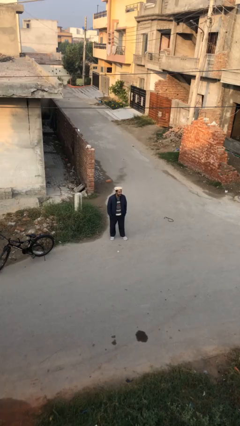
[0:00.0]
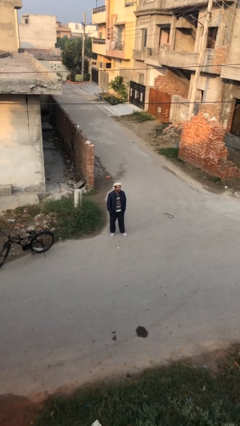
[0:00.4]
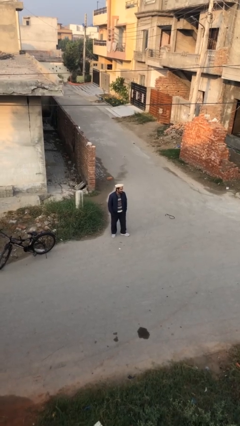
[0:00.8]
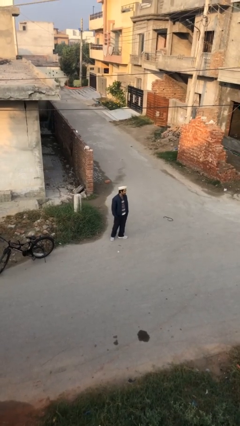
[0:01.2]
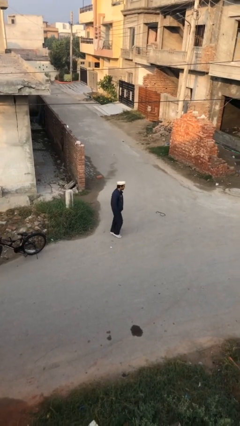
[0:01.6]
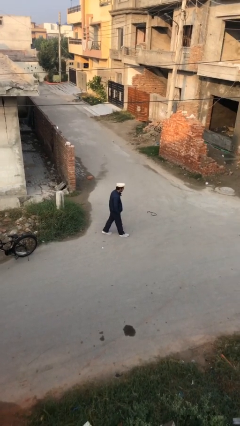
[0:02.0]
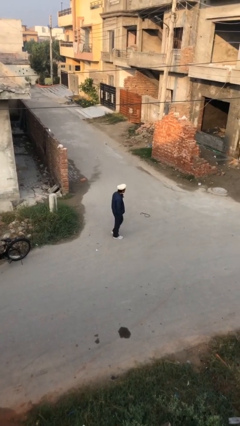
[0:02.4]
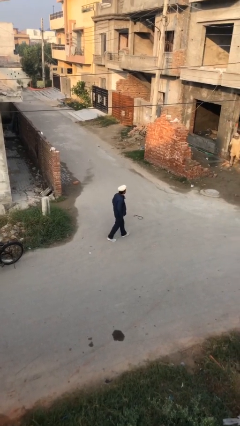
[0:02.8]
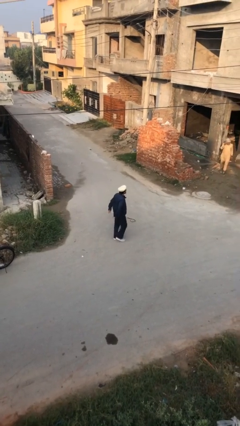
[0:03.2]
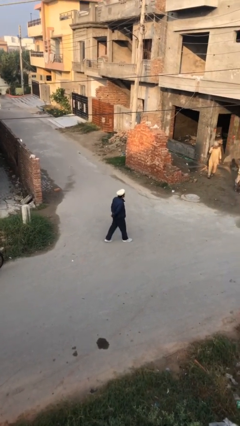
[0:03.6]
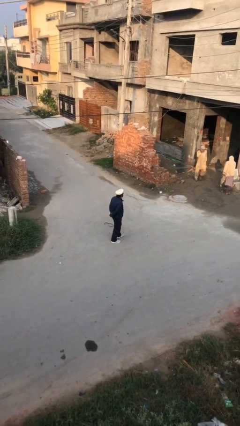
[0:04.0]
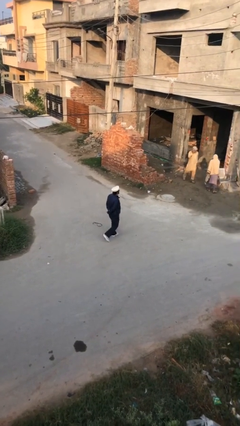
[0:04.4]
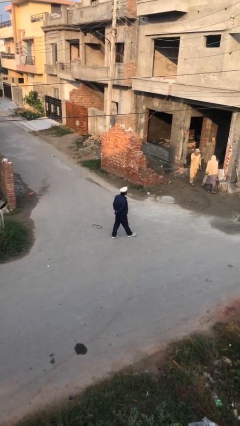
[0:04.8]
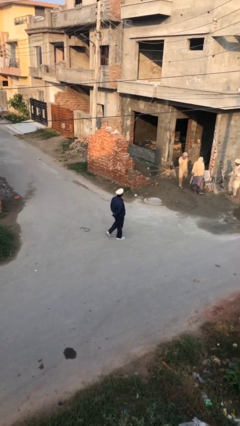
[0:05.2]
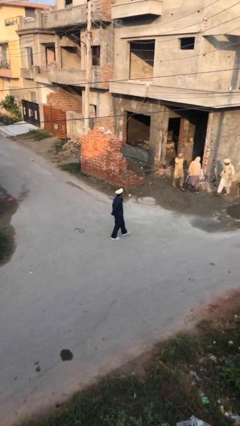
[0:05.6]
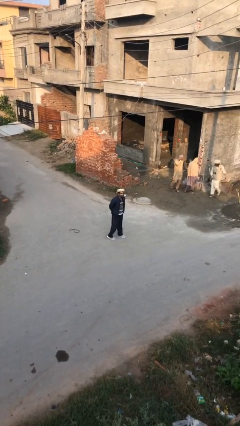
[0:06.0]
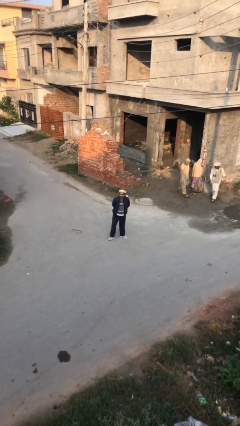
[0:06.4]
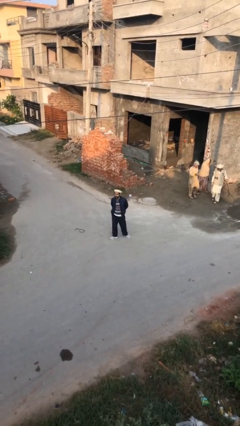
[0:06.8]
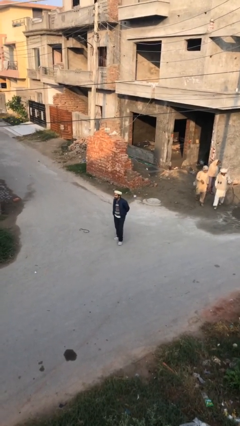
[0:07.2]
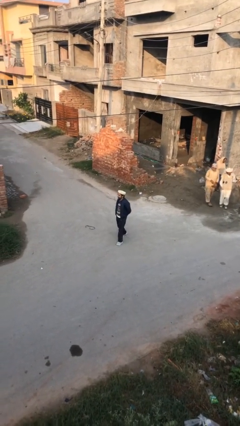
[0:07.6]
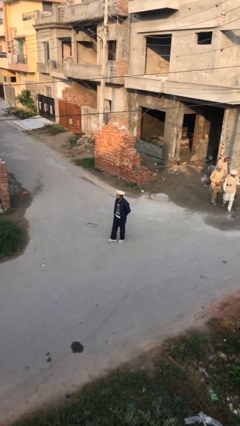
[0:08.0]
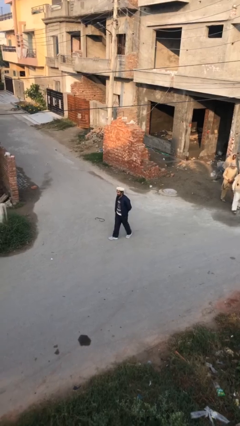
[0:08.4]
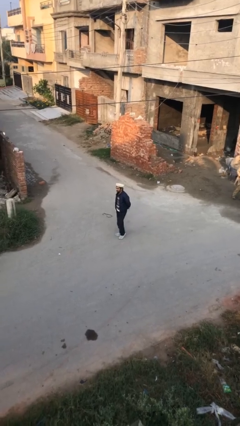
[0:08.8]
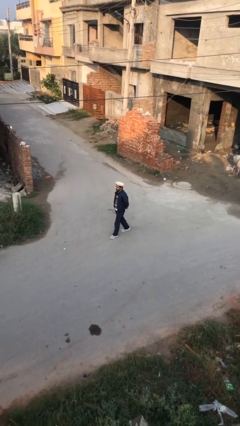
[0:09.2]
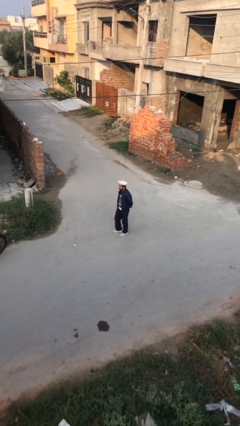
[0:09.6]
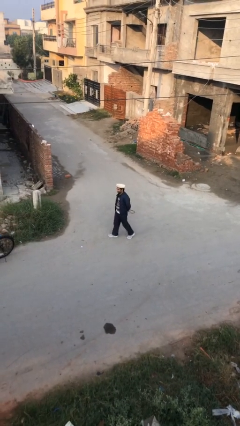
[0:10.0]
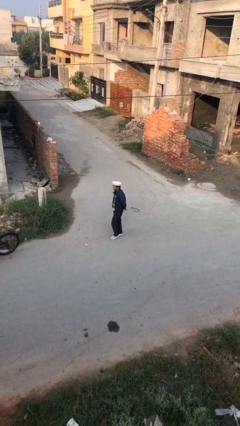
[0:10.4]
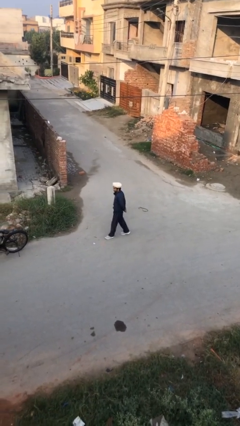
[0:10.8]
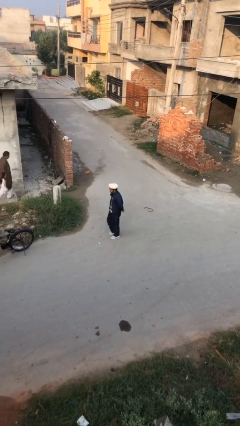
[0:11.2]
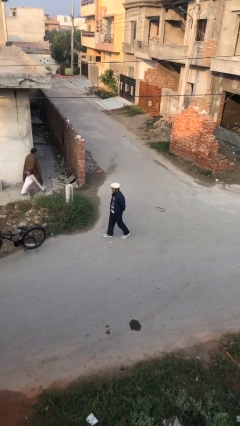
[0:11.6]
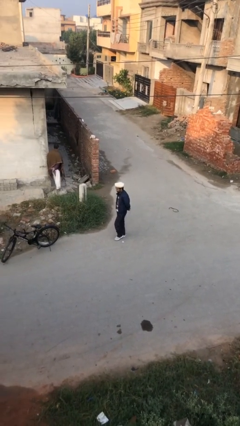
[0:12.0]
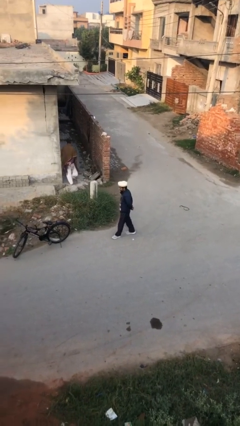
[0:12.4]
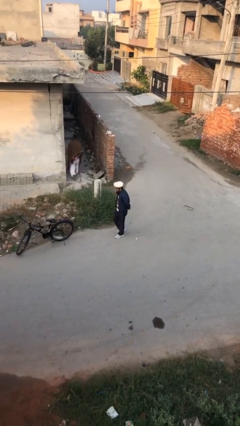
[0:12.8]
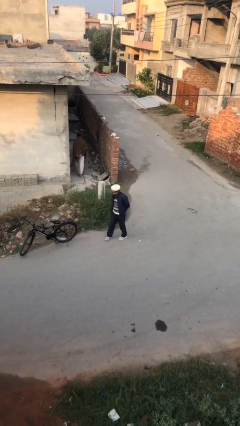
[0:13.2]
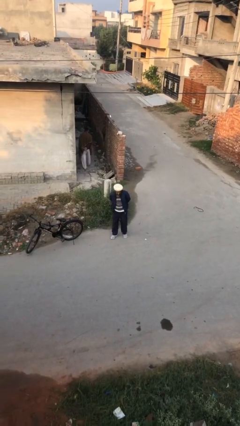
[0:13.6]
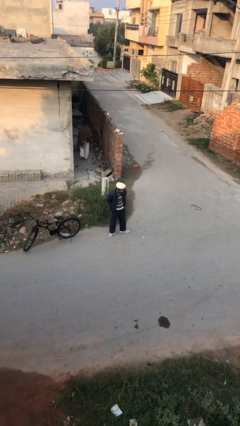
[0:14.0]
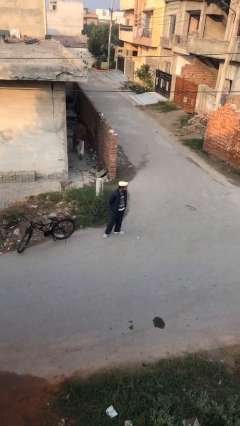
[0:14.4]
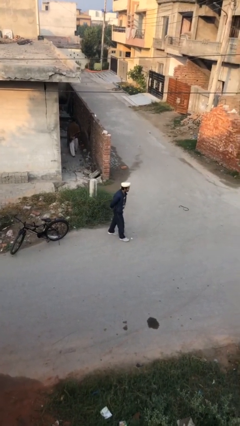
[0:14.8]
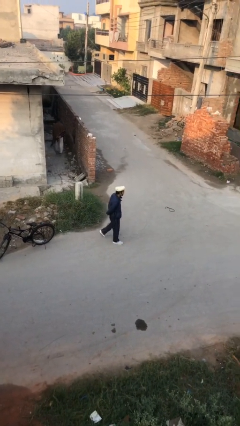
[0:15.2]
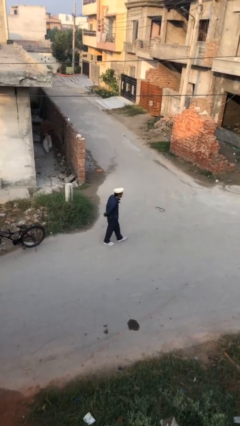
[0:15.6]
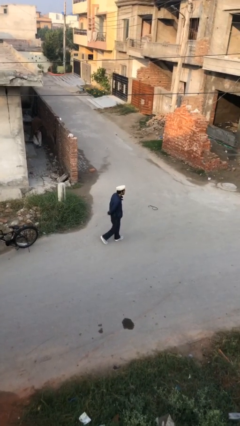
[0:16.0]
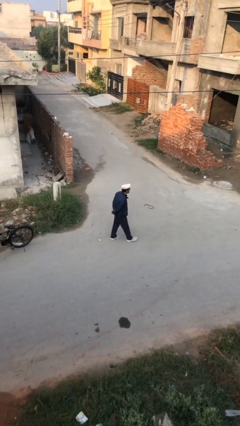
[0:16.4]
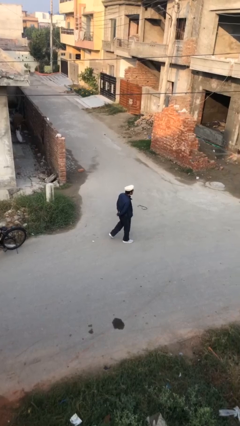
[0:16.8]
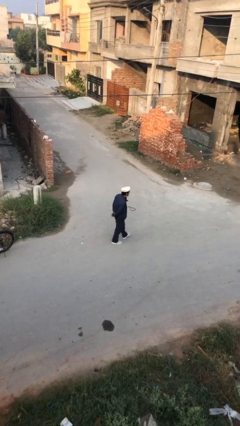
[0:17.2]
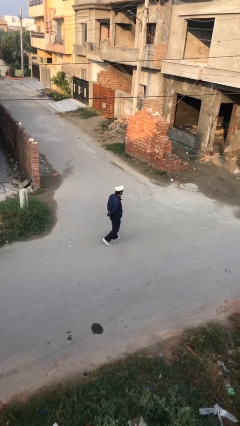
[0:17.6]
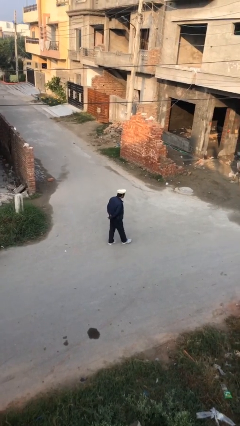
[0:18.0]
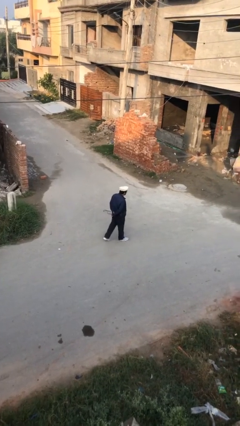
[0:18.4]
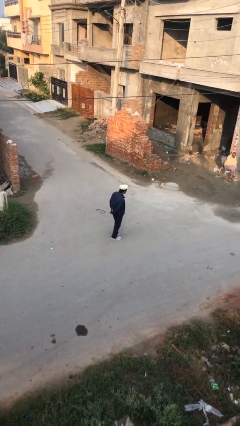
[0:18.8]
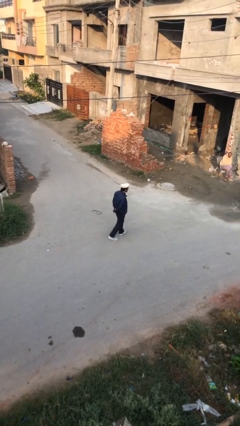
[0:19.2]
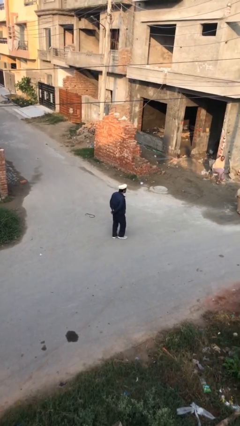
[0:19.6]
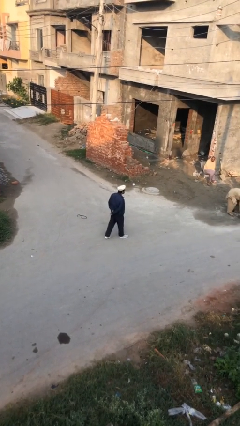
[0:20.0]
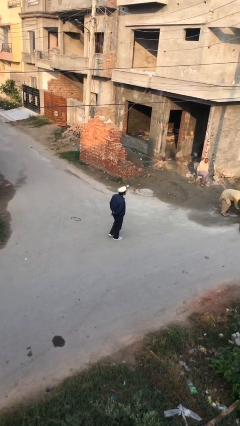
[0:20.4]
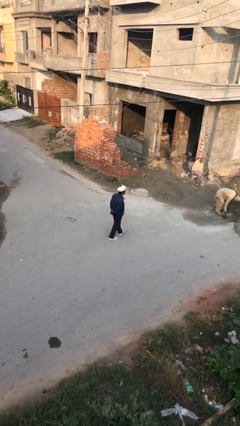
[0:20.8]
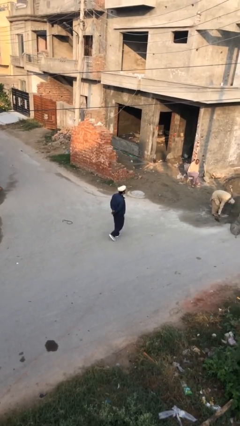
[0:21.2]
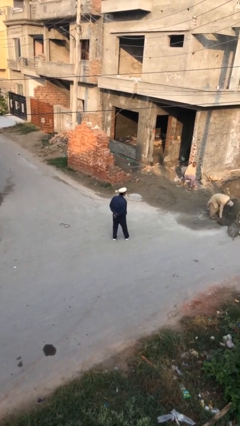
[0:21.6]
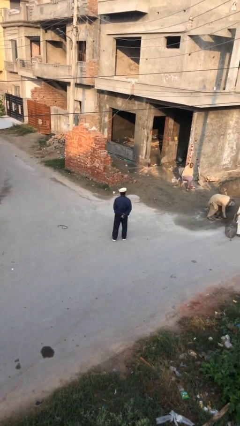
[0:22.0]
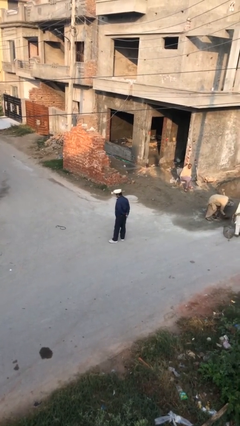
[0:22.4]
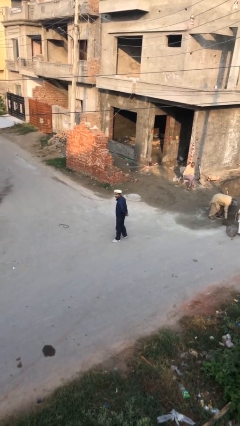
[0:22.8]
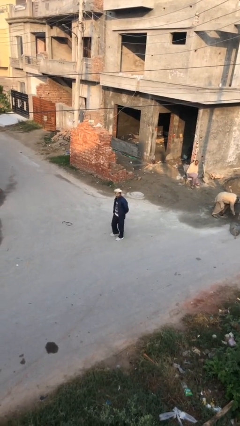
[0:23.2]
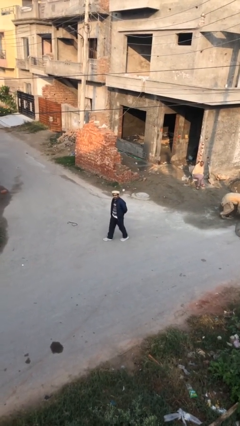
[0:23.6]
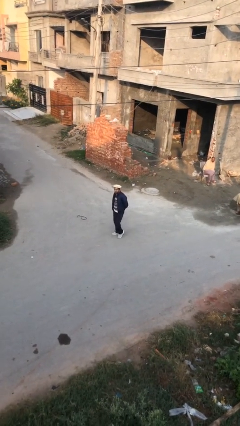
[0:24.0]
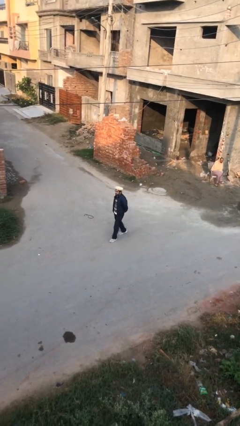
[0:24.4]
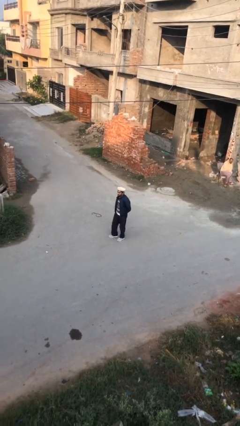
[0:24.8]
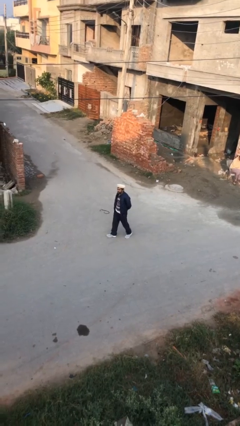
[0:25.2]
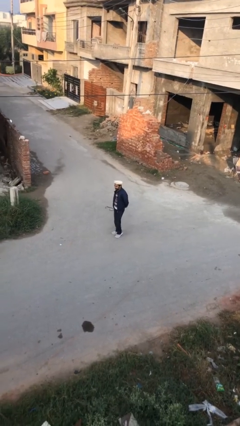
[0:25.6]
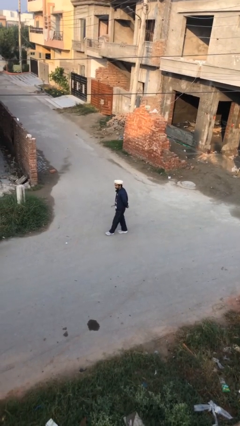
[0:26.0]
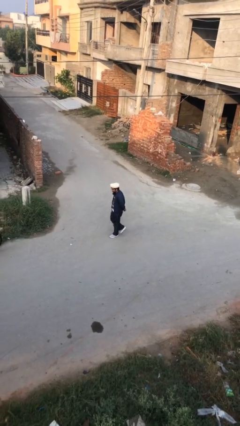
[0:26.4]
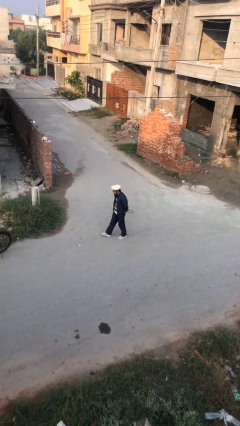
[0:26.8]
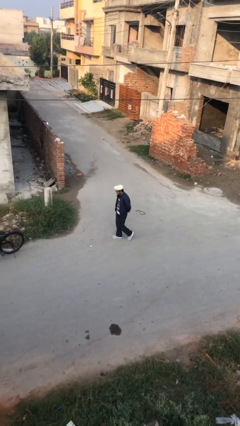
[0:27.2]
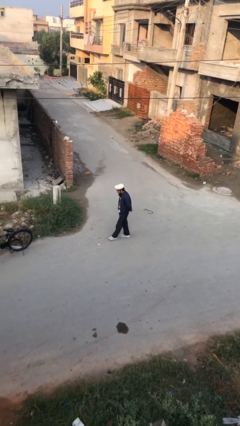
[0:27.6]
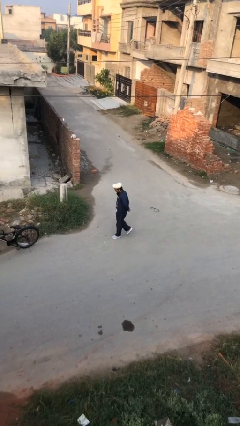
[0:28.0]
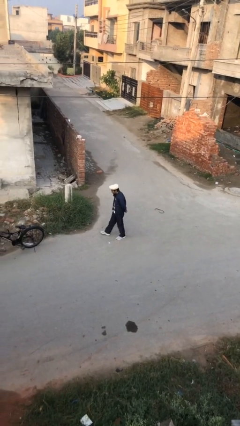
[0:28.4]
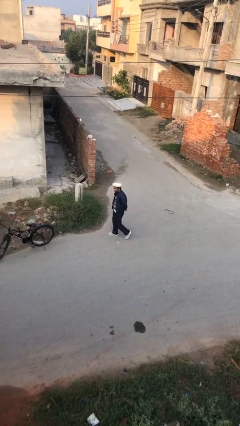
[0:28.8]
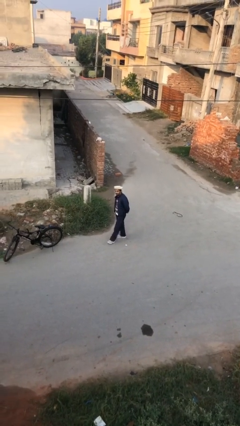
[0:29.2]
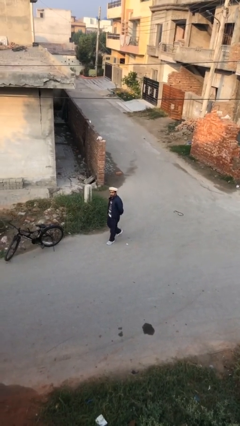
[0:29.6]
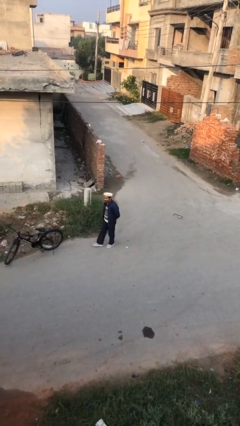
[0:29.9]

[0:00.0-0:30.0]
person walks

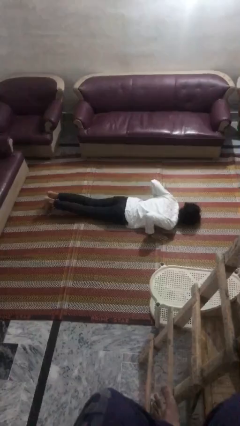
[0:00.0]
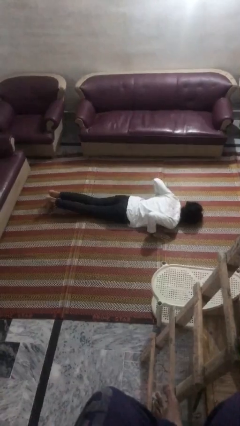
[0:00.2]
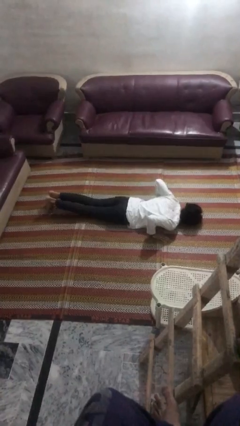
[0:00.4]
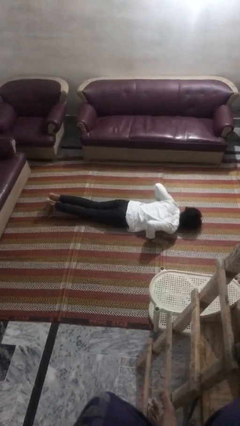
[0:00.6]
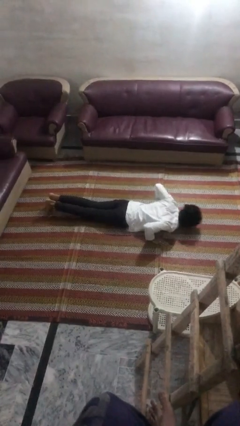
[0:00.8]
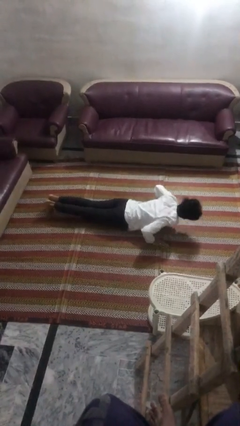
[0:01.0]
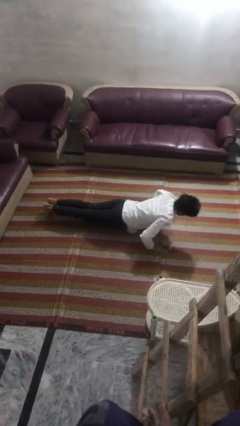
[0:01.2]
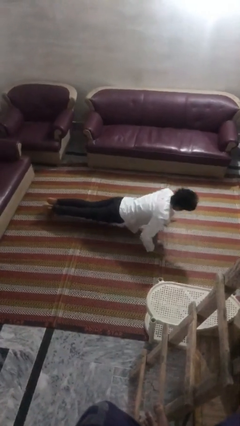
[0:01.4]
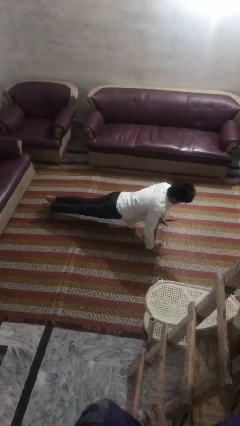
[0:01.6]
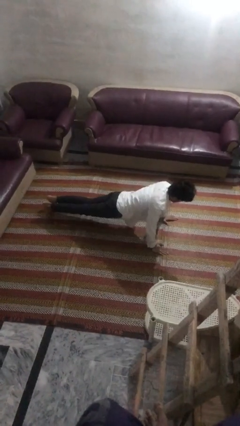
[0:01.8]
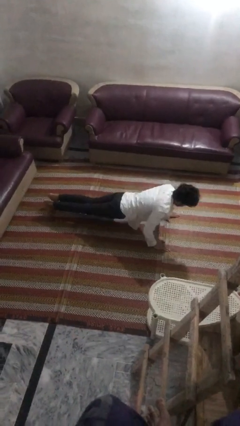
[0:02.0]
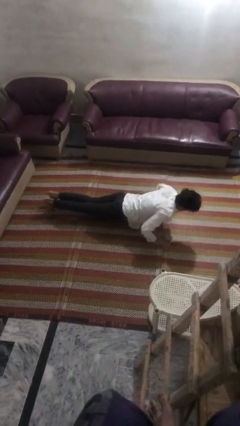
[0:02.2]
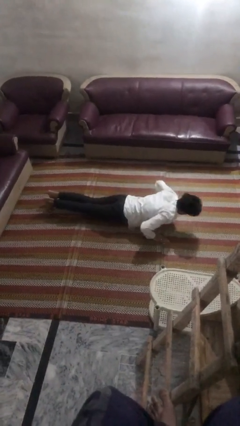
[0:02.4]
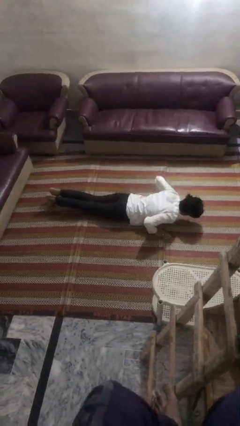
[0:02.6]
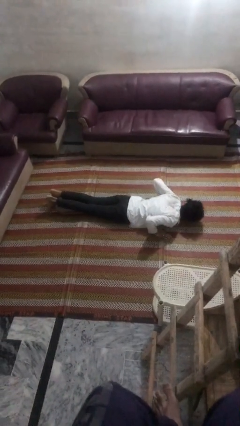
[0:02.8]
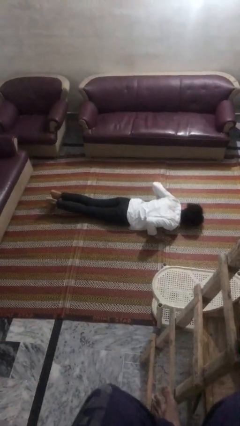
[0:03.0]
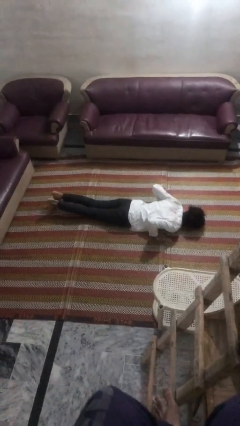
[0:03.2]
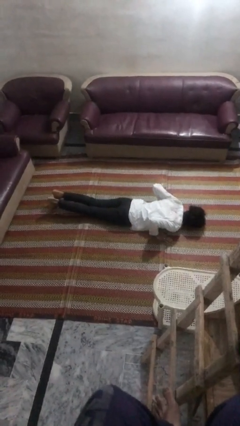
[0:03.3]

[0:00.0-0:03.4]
person exercises with pushup
